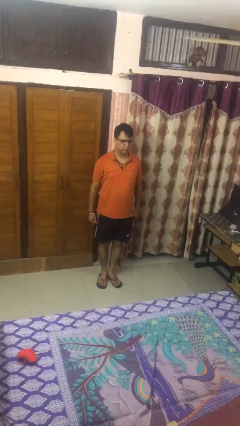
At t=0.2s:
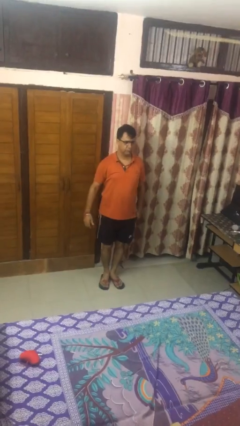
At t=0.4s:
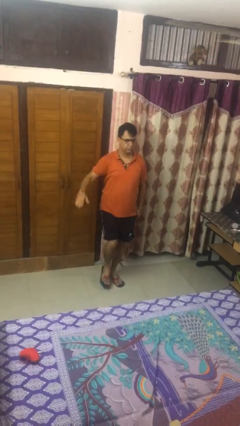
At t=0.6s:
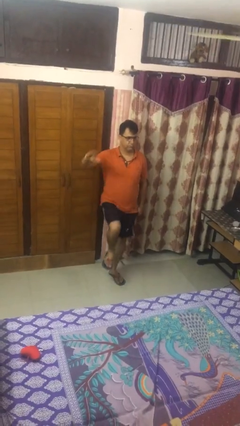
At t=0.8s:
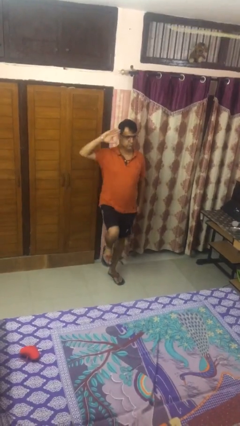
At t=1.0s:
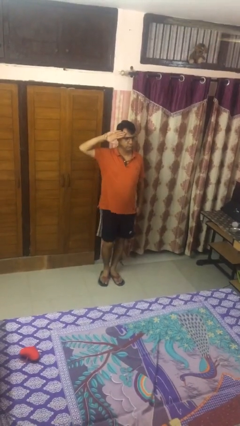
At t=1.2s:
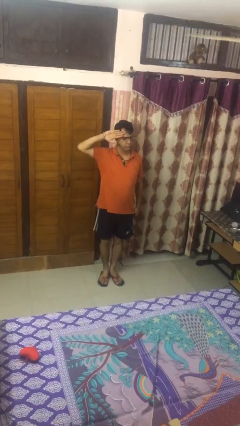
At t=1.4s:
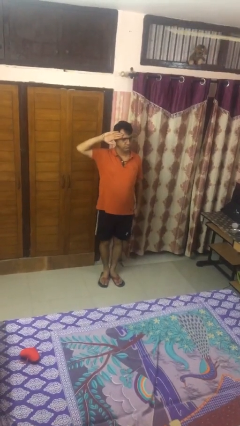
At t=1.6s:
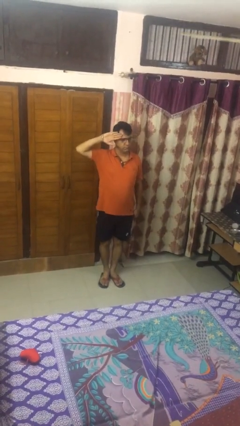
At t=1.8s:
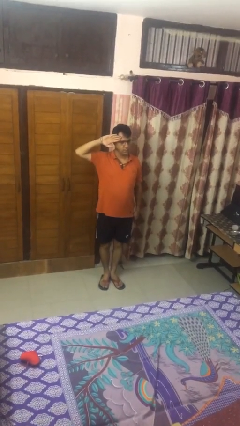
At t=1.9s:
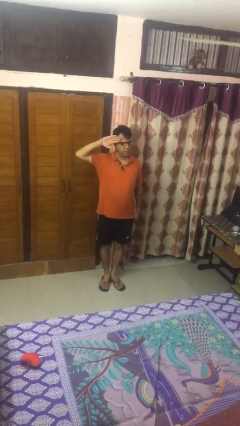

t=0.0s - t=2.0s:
person salutes

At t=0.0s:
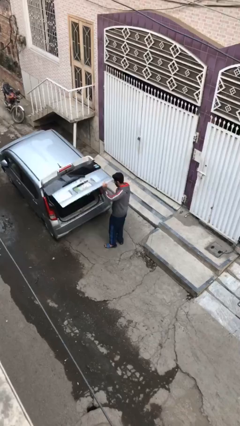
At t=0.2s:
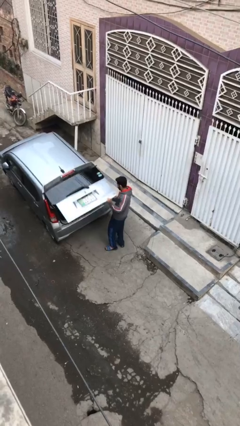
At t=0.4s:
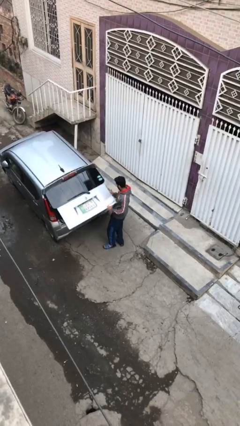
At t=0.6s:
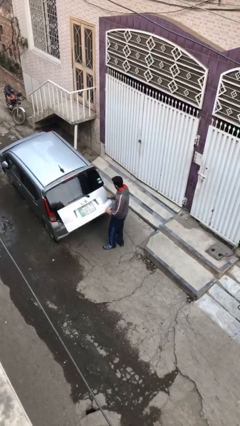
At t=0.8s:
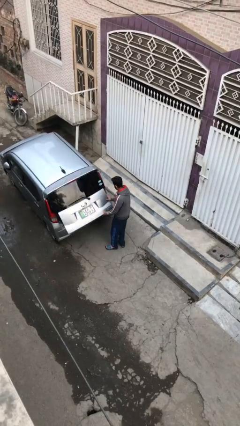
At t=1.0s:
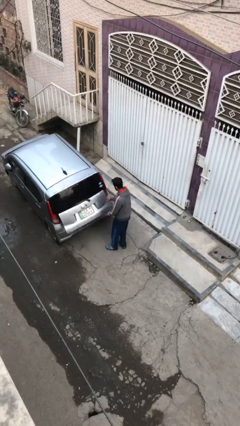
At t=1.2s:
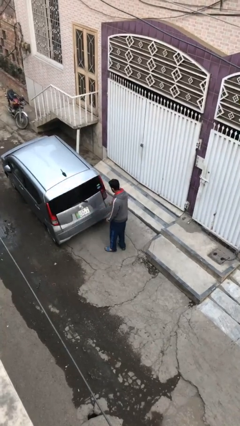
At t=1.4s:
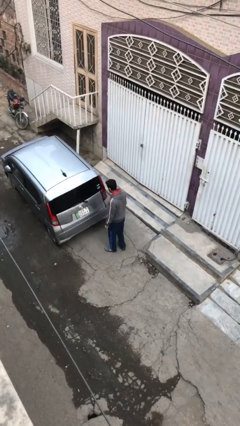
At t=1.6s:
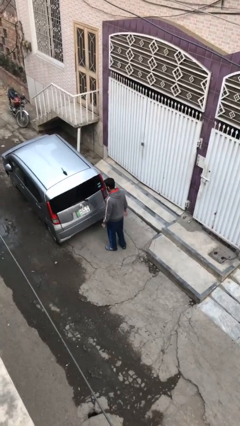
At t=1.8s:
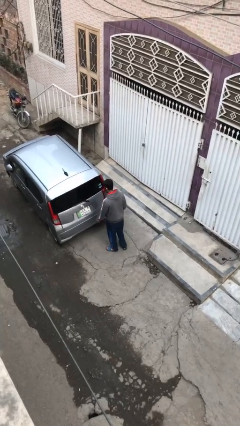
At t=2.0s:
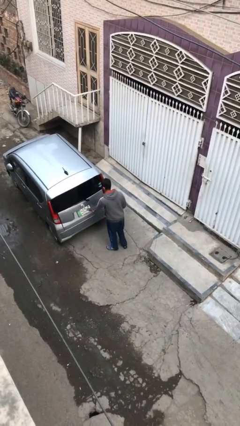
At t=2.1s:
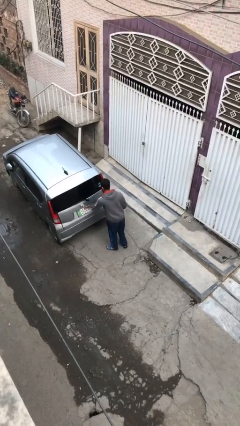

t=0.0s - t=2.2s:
person closes car trunk

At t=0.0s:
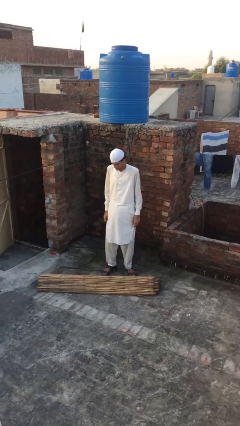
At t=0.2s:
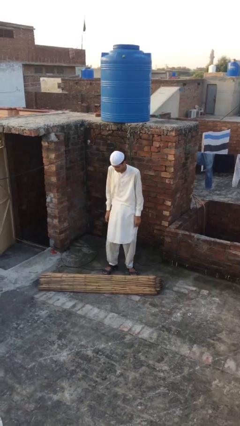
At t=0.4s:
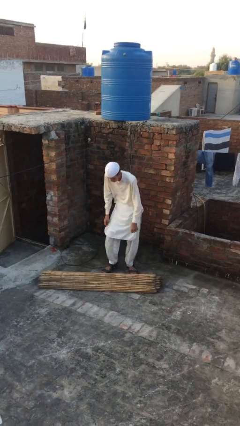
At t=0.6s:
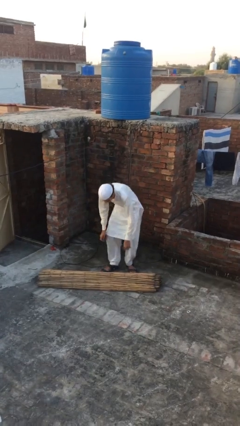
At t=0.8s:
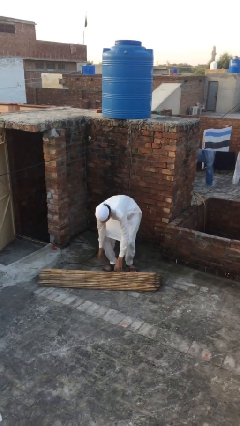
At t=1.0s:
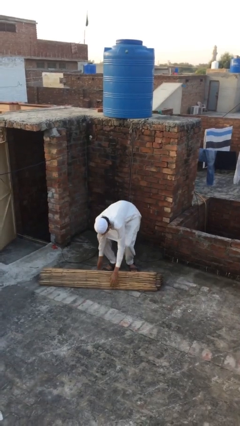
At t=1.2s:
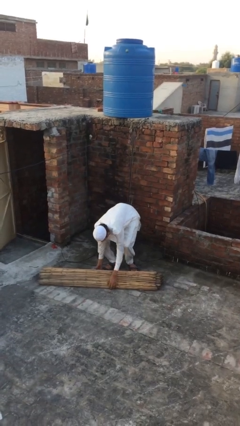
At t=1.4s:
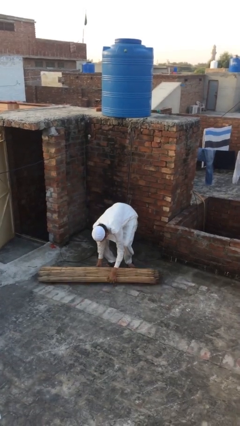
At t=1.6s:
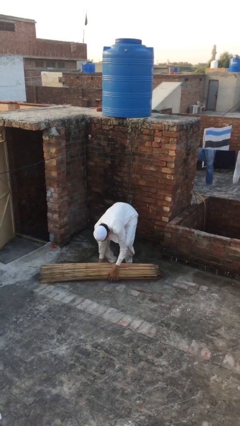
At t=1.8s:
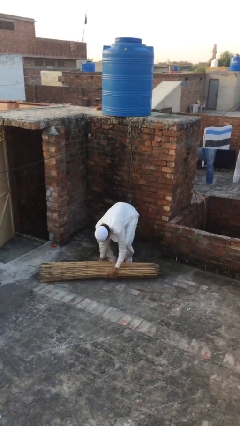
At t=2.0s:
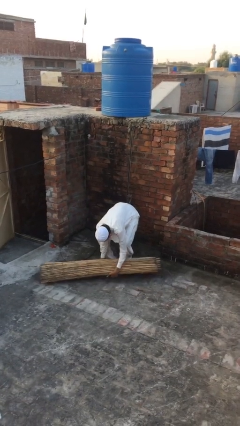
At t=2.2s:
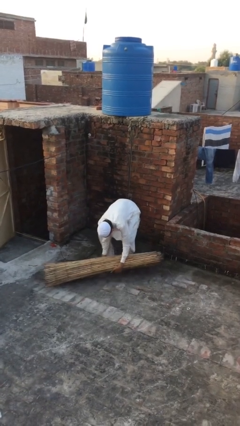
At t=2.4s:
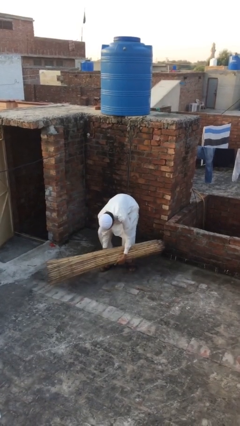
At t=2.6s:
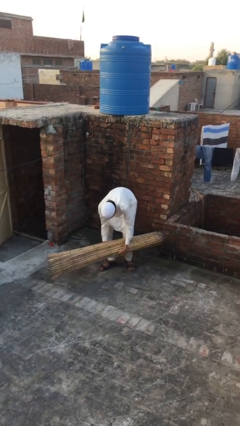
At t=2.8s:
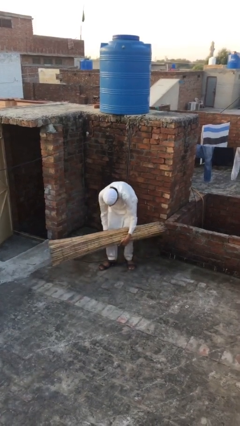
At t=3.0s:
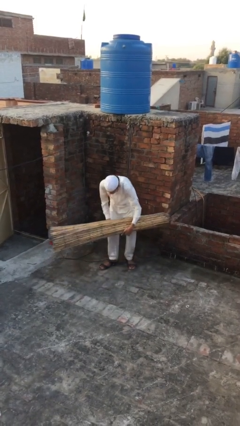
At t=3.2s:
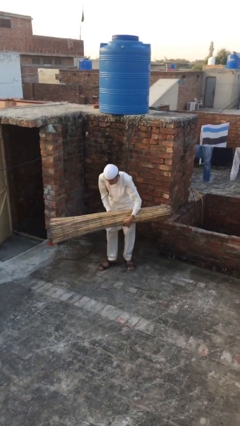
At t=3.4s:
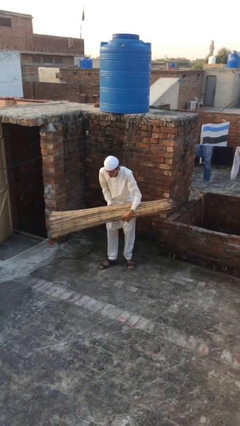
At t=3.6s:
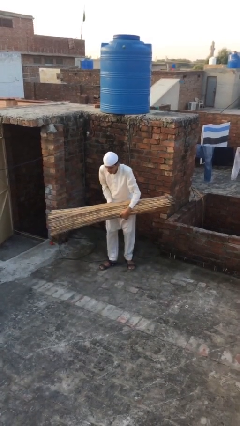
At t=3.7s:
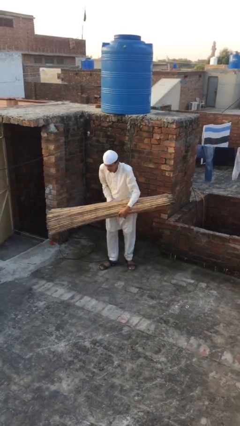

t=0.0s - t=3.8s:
person picks up object from floor

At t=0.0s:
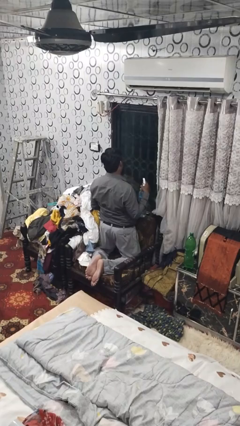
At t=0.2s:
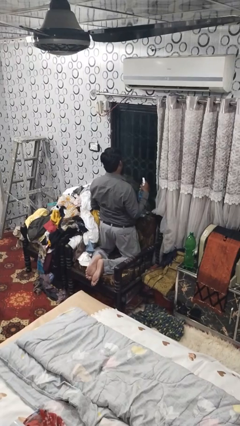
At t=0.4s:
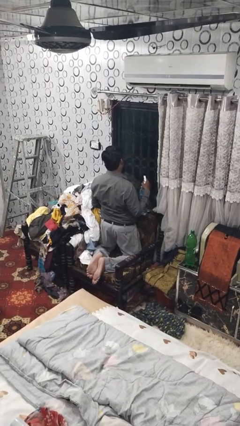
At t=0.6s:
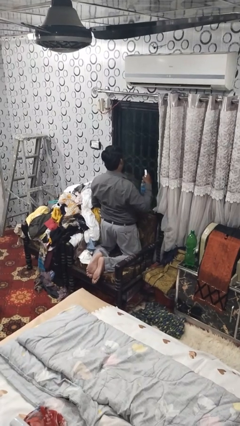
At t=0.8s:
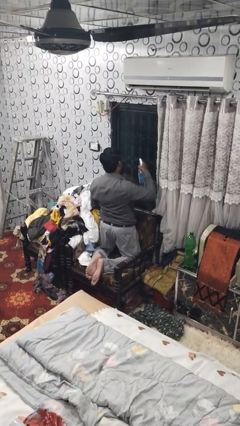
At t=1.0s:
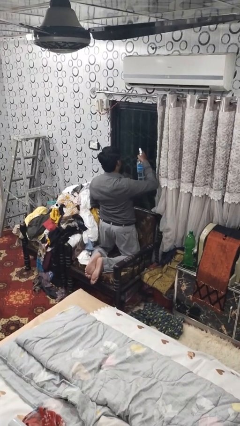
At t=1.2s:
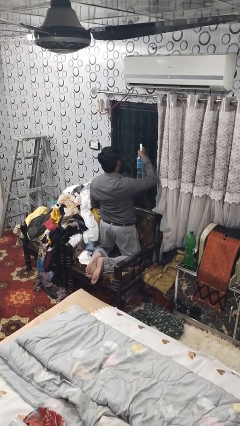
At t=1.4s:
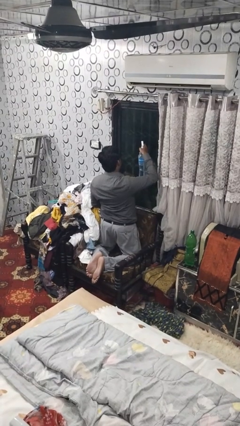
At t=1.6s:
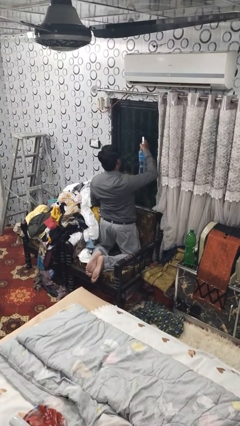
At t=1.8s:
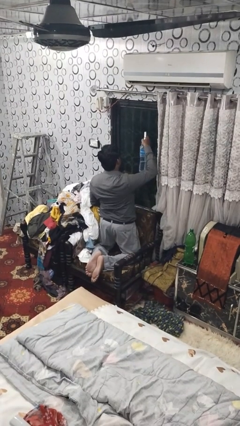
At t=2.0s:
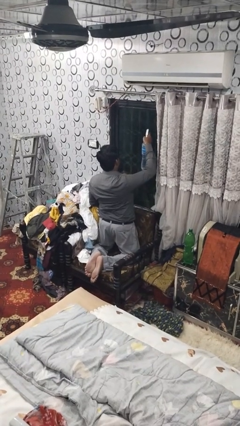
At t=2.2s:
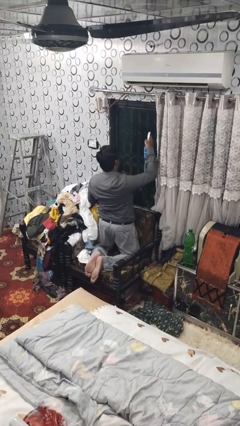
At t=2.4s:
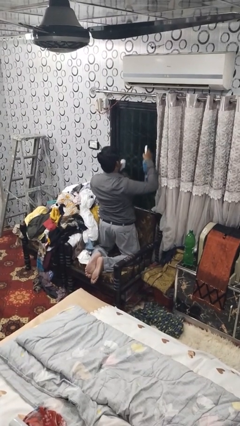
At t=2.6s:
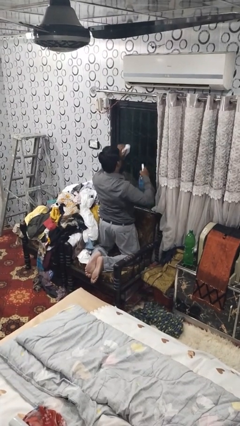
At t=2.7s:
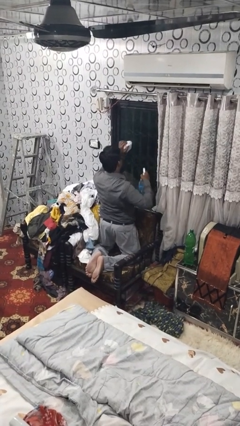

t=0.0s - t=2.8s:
person sprays from bottle

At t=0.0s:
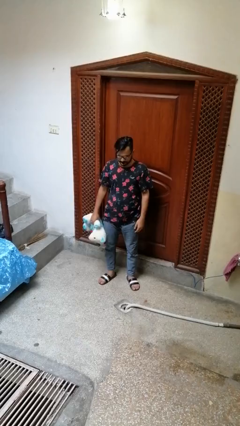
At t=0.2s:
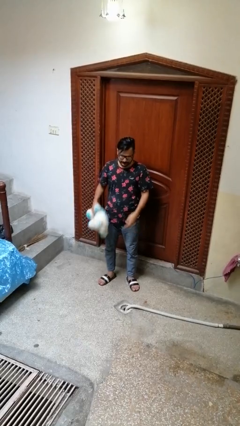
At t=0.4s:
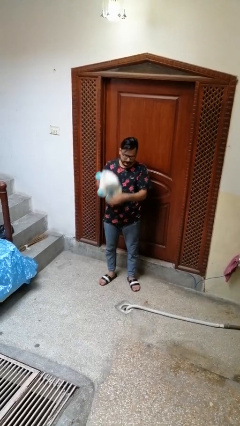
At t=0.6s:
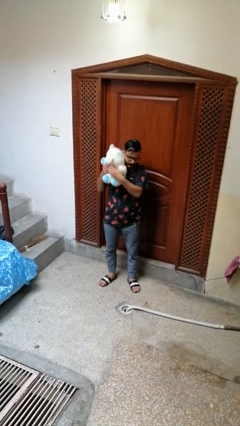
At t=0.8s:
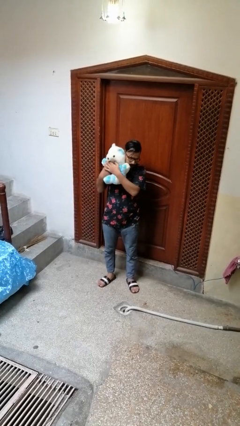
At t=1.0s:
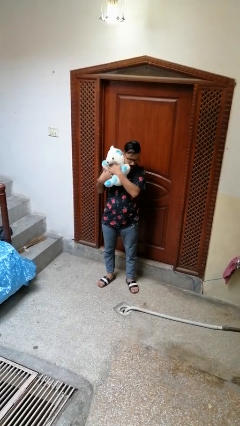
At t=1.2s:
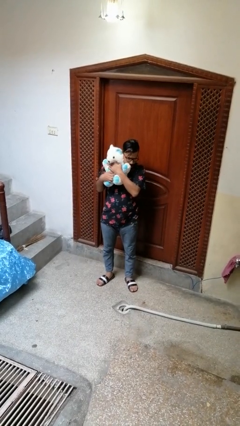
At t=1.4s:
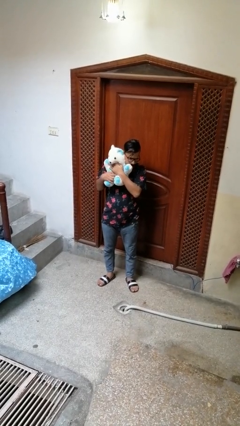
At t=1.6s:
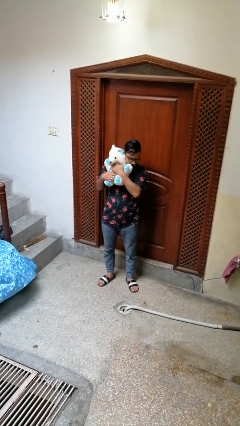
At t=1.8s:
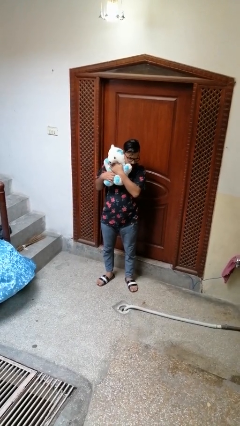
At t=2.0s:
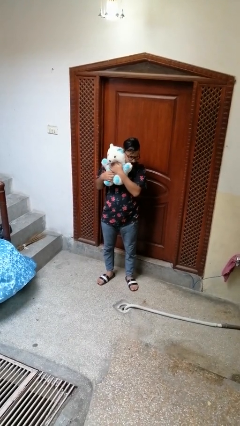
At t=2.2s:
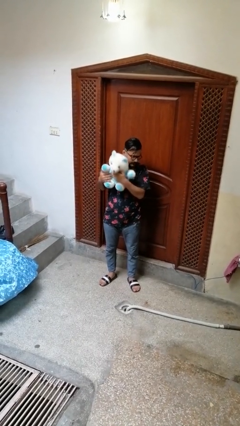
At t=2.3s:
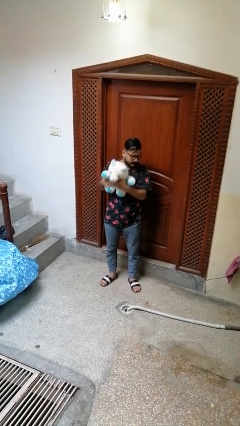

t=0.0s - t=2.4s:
person hugs stuffed animal

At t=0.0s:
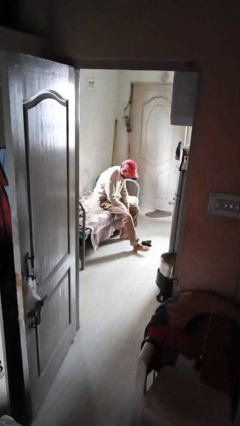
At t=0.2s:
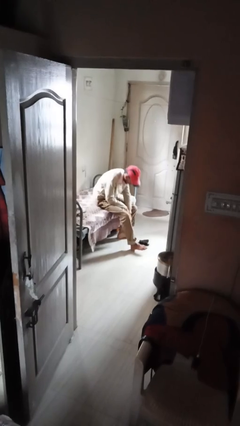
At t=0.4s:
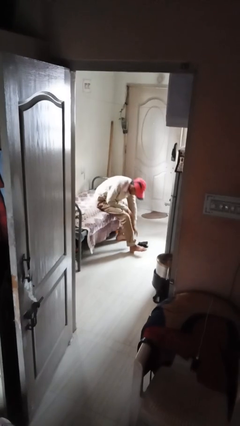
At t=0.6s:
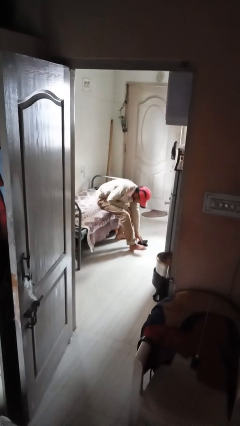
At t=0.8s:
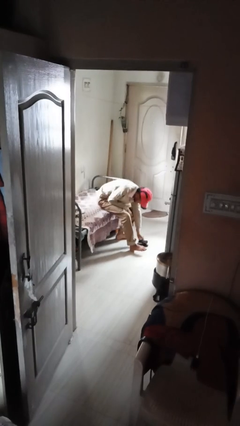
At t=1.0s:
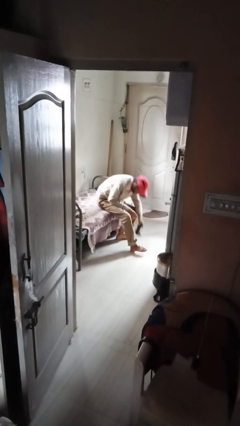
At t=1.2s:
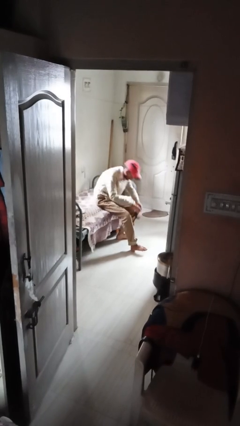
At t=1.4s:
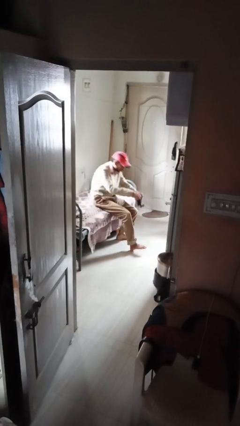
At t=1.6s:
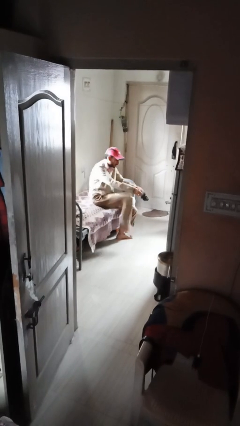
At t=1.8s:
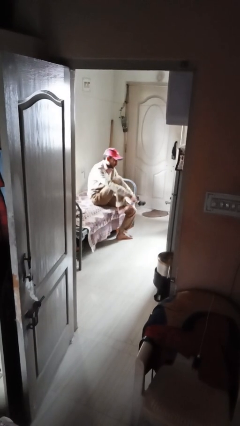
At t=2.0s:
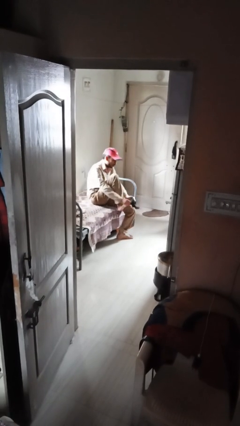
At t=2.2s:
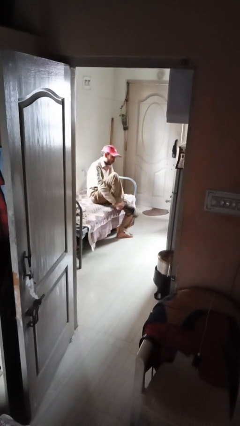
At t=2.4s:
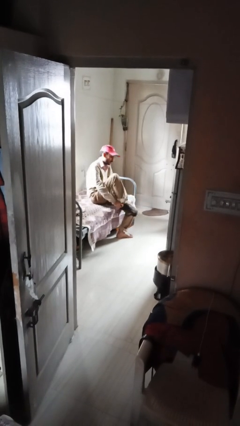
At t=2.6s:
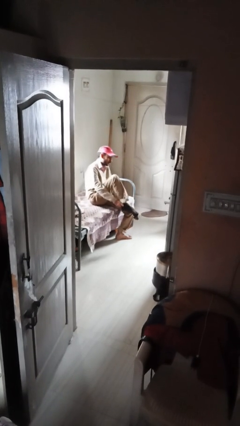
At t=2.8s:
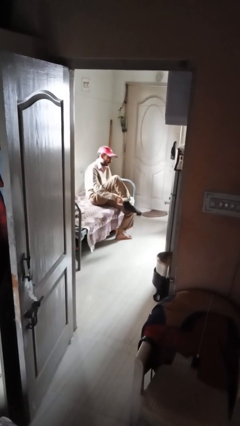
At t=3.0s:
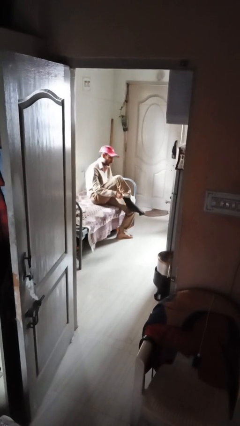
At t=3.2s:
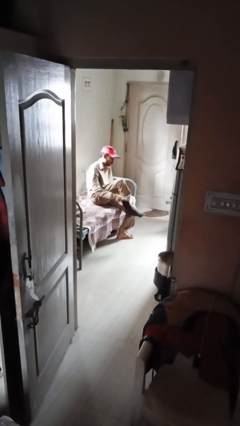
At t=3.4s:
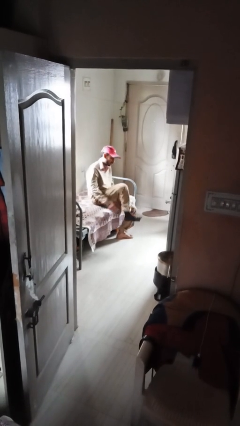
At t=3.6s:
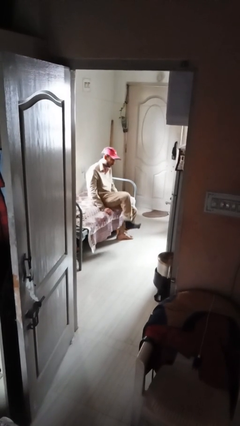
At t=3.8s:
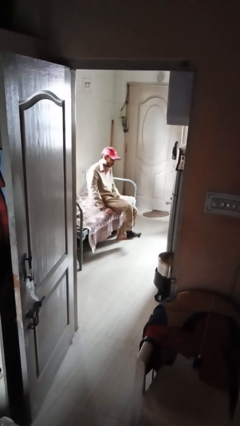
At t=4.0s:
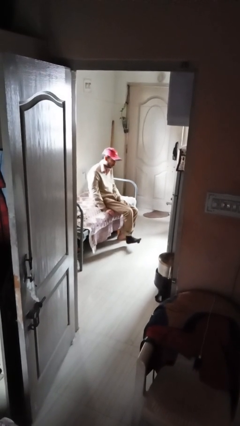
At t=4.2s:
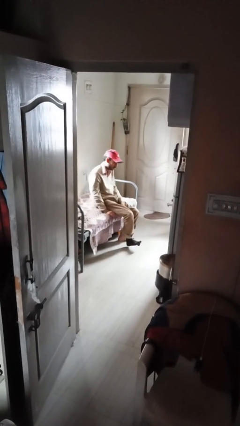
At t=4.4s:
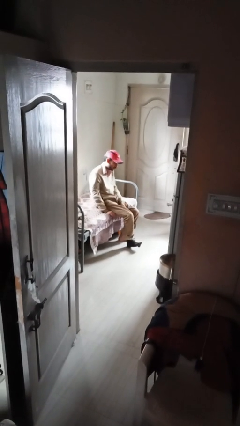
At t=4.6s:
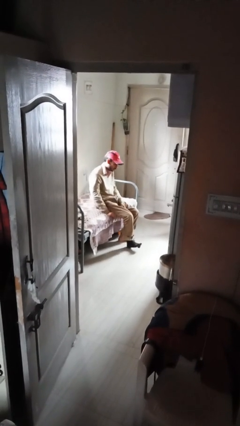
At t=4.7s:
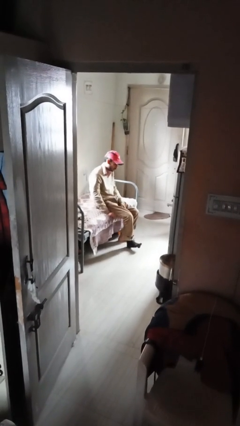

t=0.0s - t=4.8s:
person puts on socks
